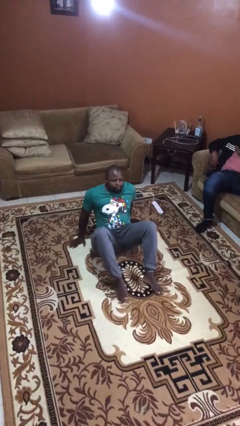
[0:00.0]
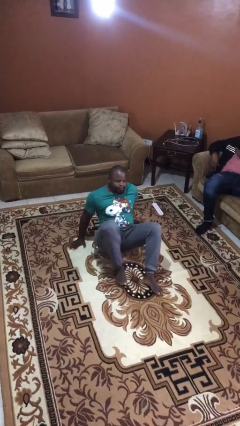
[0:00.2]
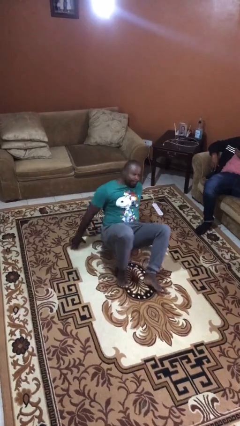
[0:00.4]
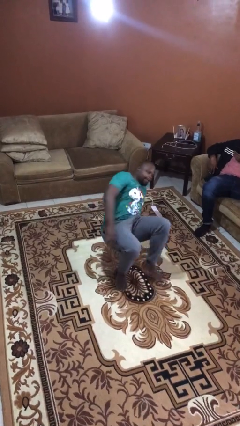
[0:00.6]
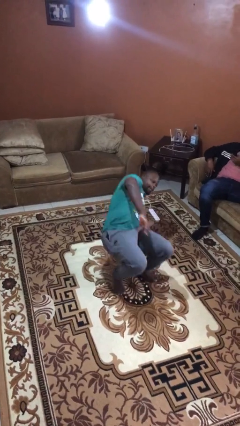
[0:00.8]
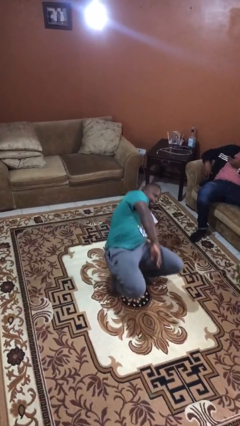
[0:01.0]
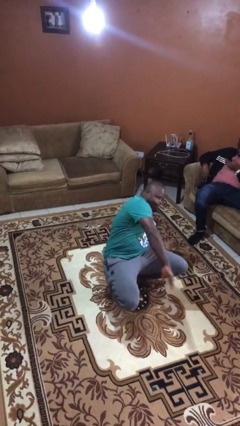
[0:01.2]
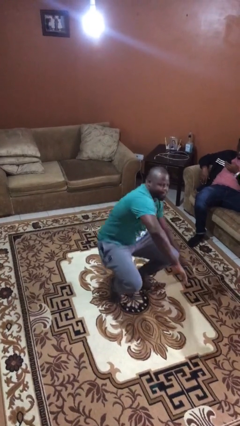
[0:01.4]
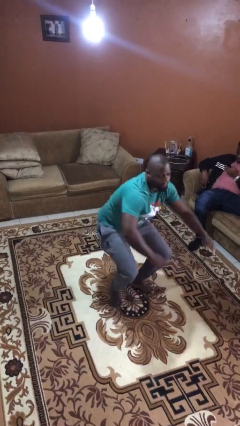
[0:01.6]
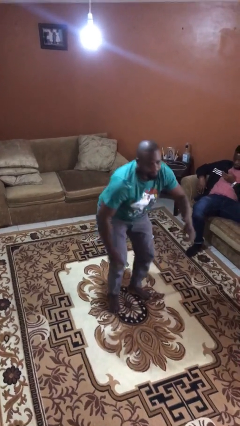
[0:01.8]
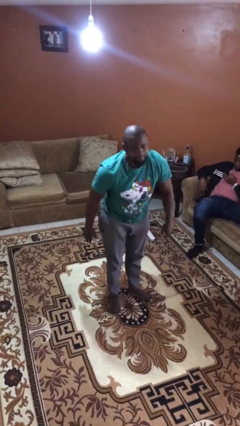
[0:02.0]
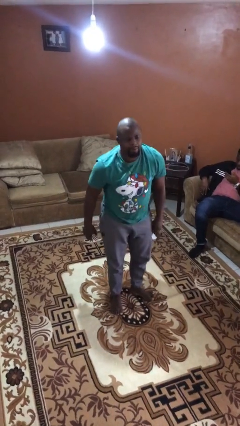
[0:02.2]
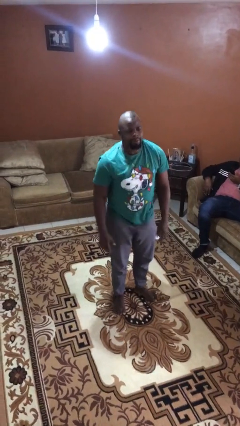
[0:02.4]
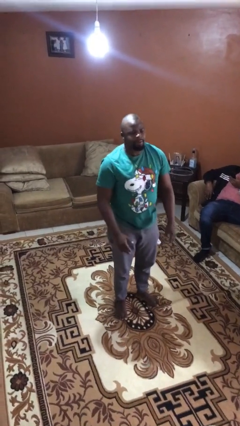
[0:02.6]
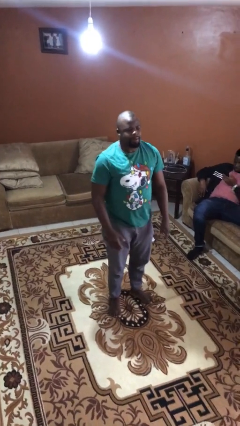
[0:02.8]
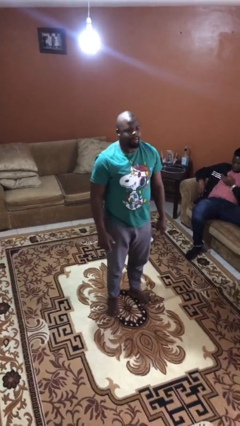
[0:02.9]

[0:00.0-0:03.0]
person stands up

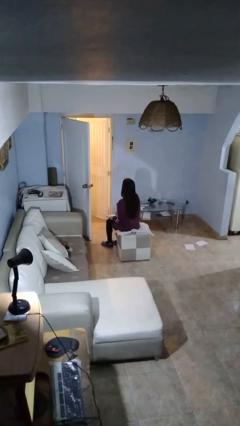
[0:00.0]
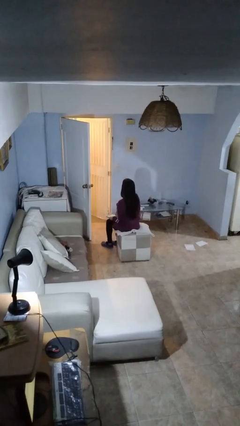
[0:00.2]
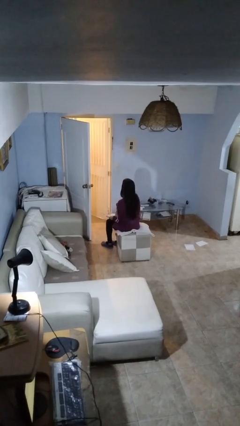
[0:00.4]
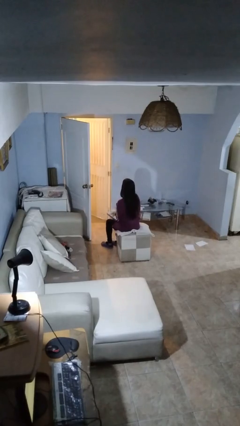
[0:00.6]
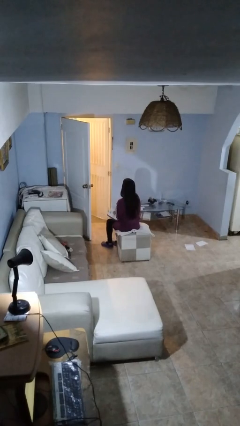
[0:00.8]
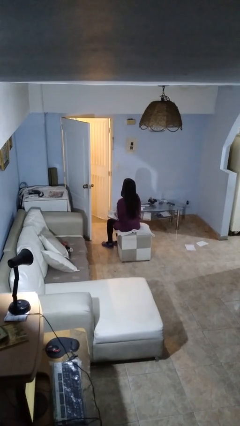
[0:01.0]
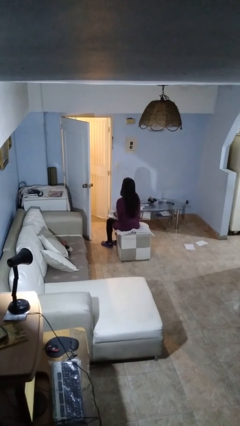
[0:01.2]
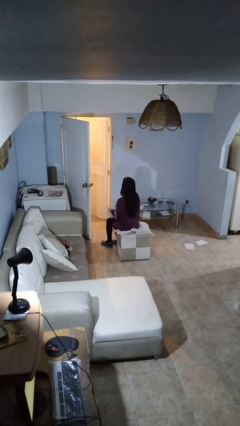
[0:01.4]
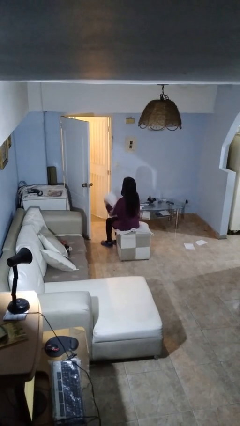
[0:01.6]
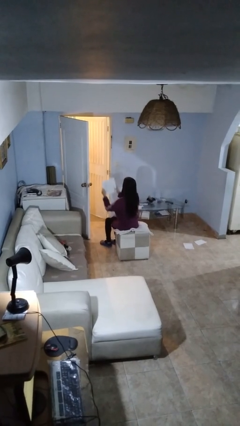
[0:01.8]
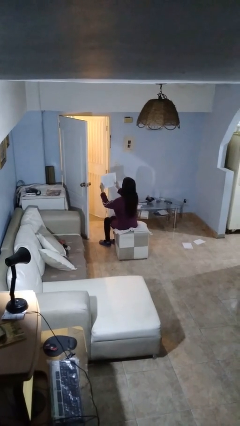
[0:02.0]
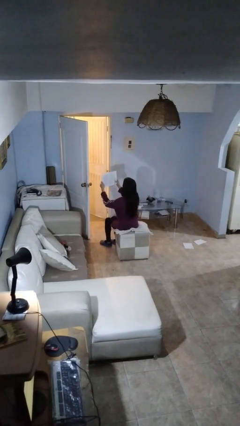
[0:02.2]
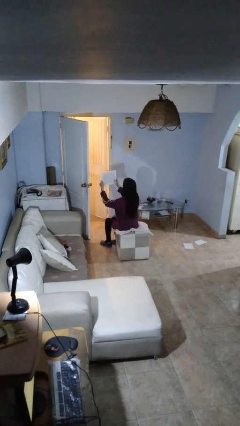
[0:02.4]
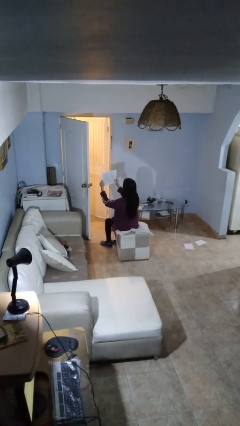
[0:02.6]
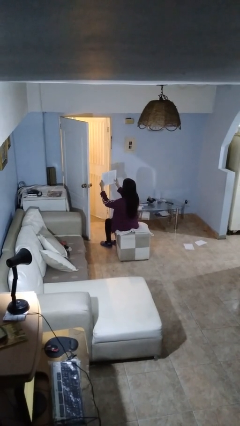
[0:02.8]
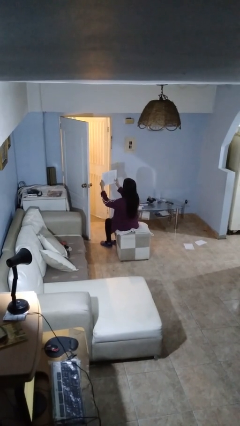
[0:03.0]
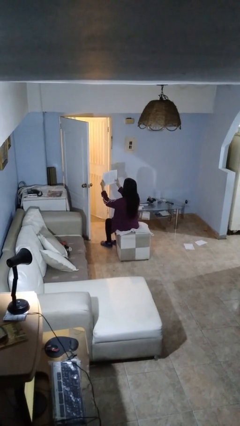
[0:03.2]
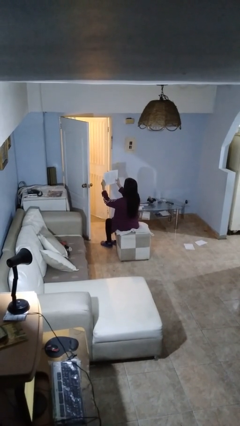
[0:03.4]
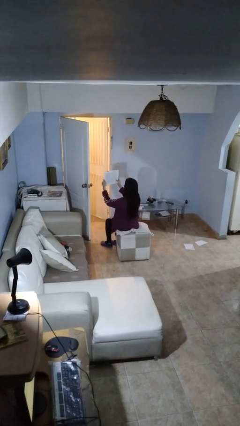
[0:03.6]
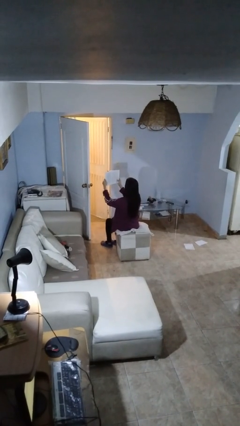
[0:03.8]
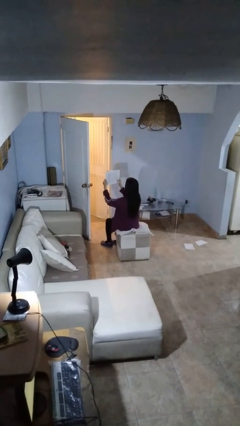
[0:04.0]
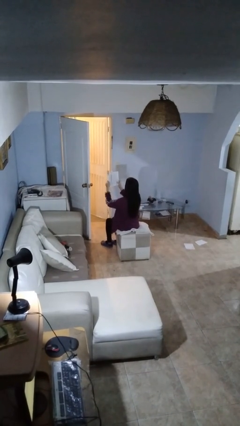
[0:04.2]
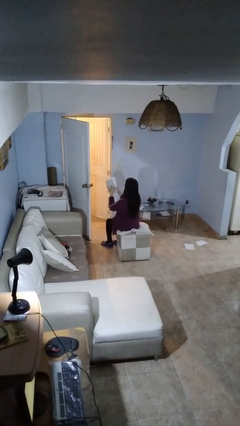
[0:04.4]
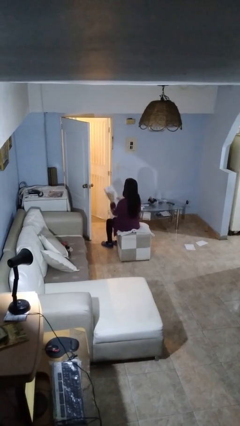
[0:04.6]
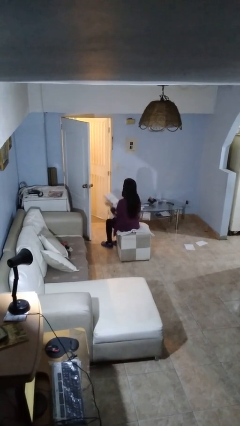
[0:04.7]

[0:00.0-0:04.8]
person reads book

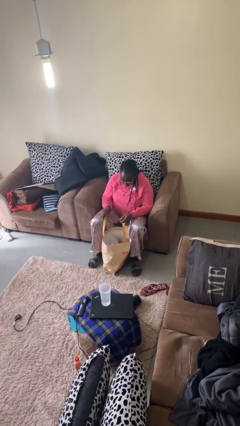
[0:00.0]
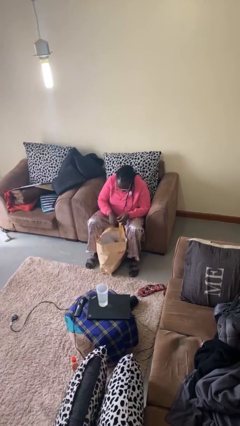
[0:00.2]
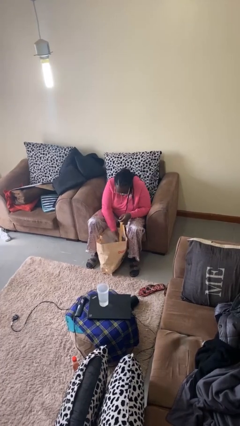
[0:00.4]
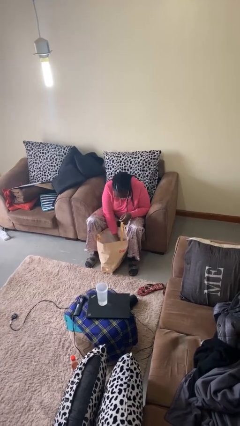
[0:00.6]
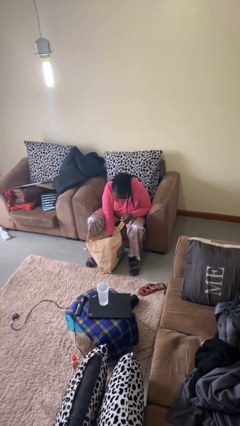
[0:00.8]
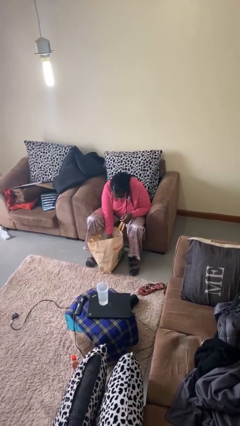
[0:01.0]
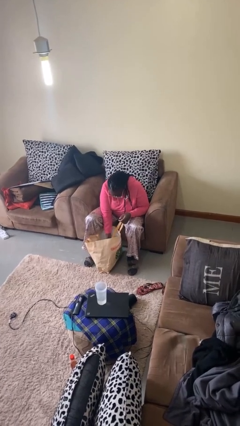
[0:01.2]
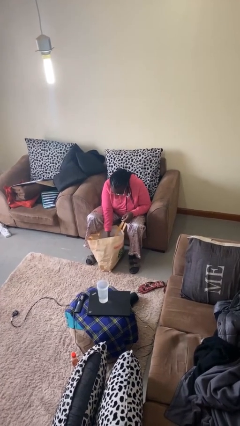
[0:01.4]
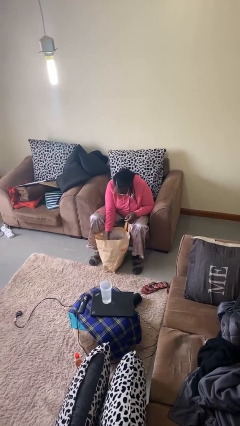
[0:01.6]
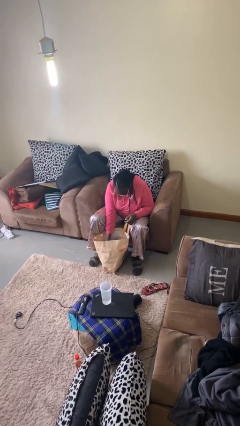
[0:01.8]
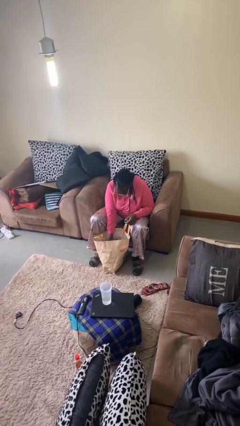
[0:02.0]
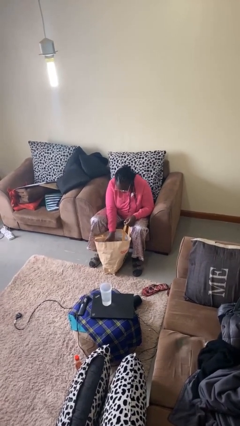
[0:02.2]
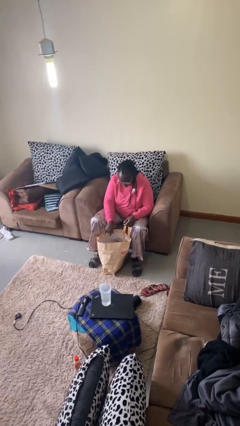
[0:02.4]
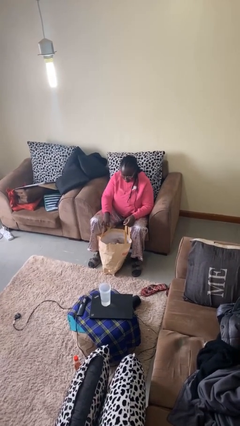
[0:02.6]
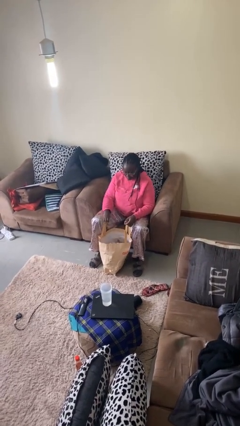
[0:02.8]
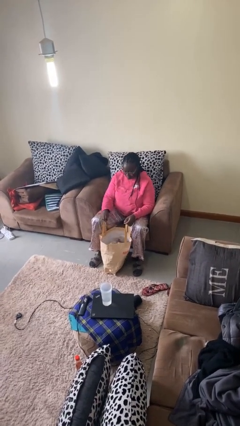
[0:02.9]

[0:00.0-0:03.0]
person searches in bag

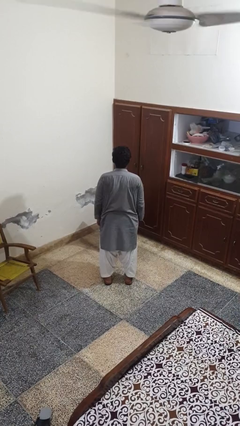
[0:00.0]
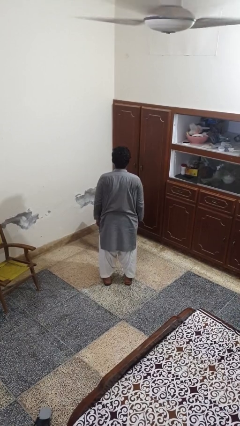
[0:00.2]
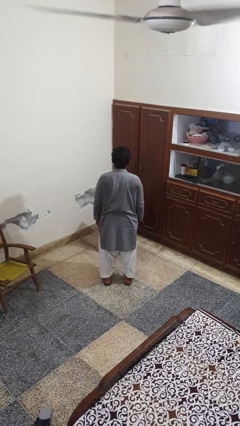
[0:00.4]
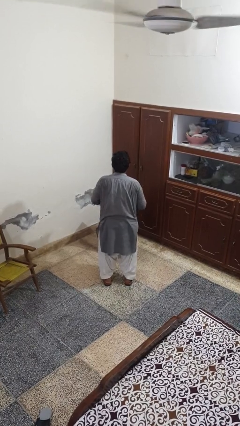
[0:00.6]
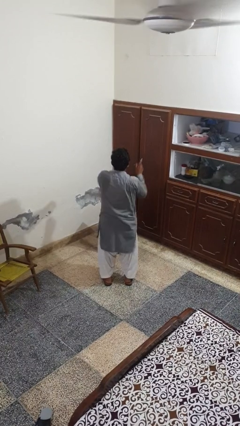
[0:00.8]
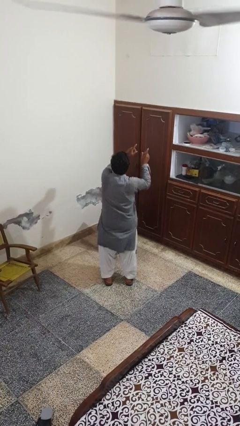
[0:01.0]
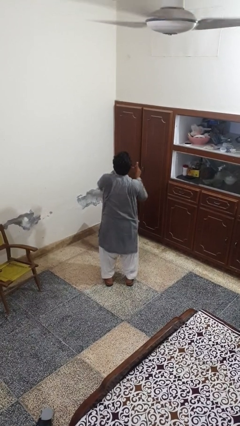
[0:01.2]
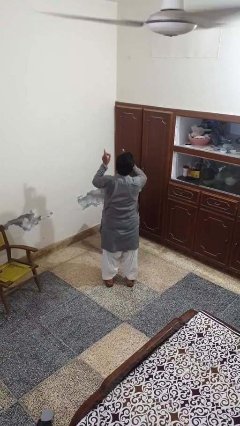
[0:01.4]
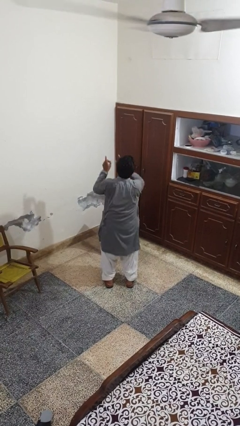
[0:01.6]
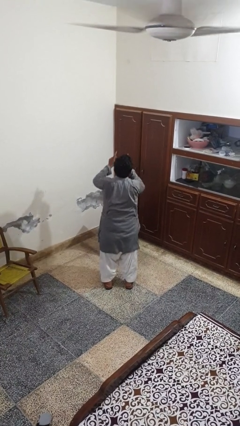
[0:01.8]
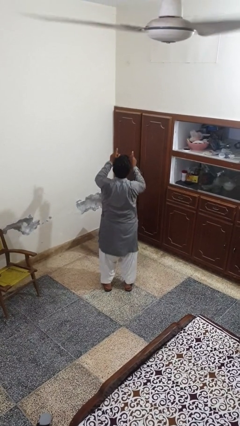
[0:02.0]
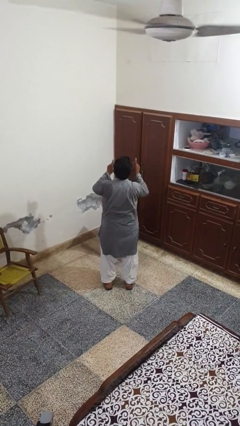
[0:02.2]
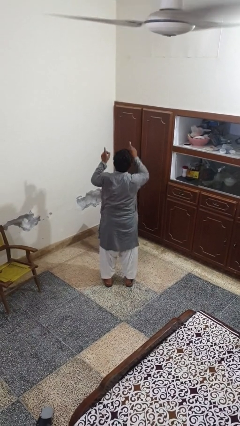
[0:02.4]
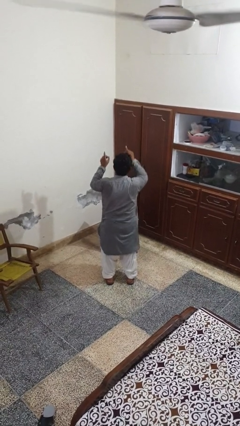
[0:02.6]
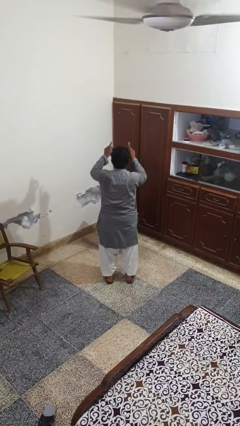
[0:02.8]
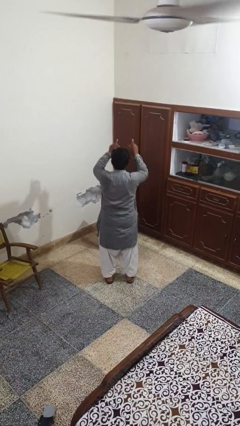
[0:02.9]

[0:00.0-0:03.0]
person dances in place

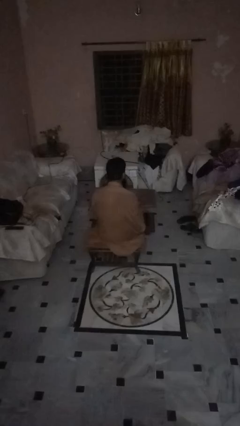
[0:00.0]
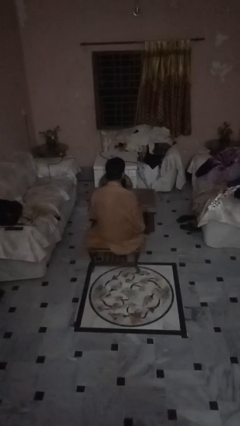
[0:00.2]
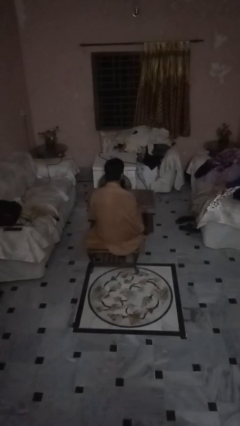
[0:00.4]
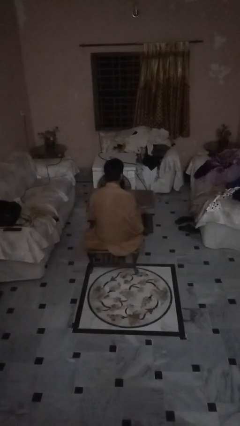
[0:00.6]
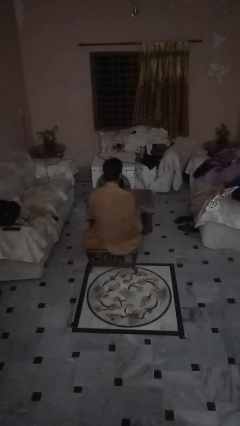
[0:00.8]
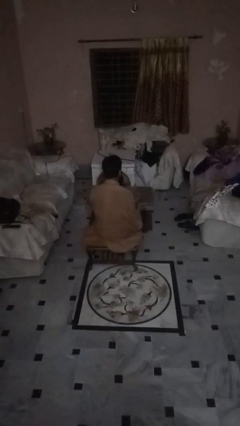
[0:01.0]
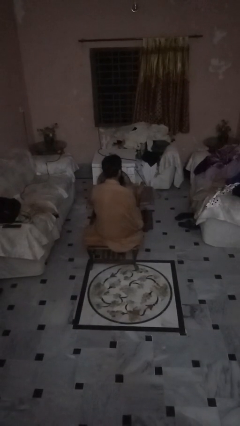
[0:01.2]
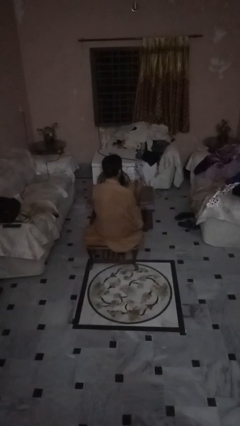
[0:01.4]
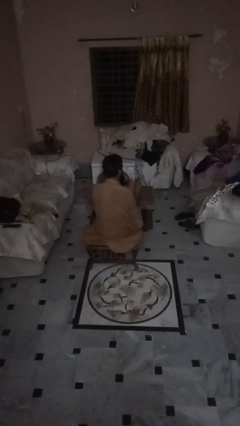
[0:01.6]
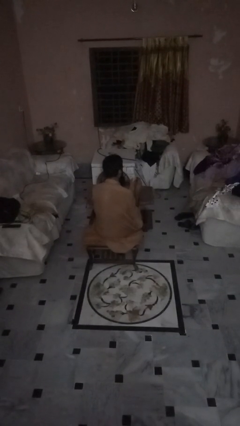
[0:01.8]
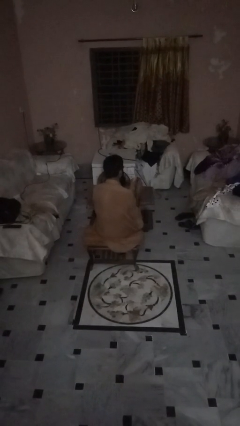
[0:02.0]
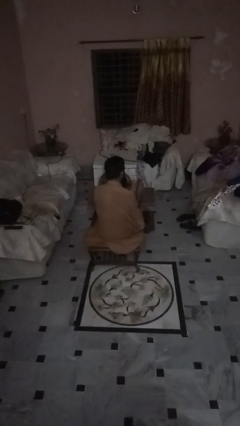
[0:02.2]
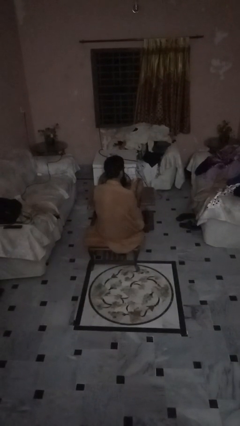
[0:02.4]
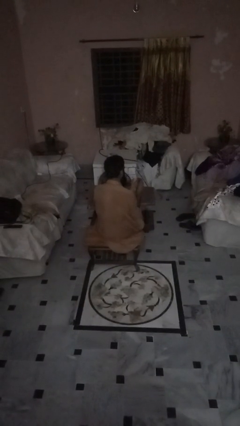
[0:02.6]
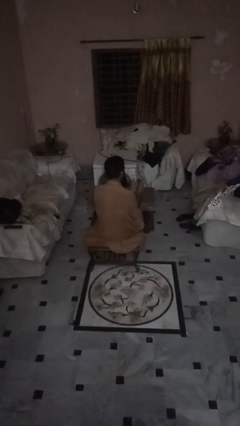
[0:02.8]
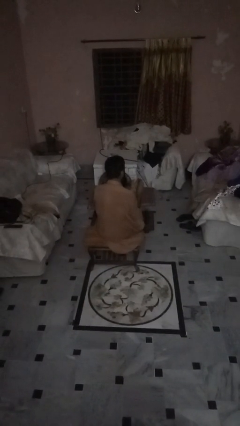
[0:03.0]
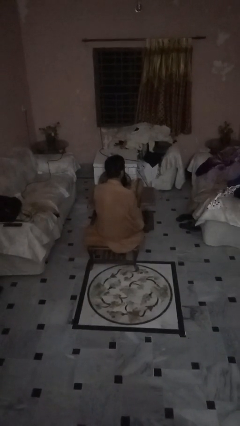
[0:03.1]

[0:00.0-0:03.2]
person clips fingernails

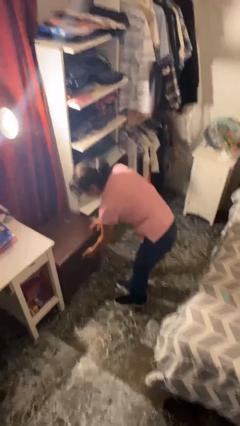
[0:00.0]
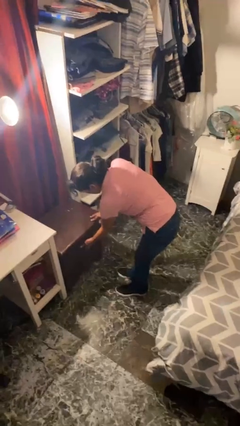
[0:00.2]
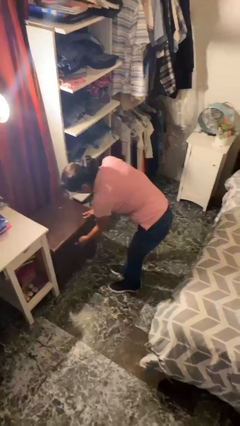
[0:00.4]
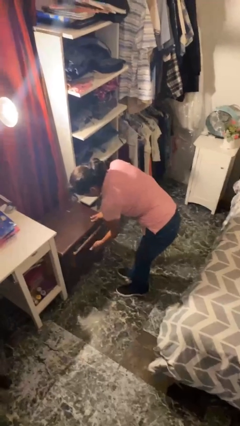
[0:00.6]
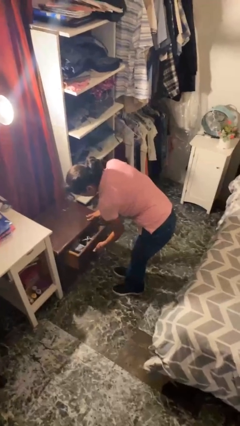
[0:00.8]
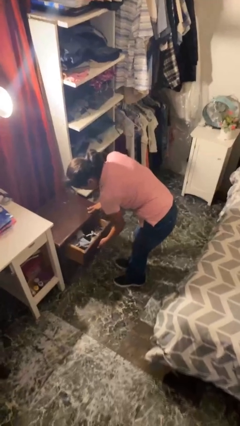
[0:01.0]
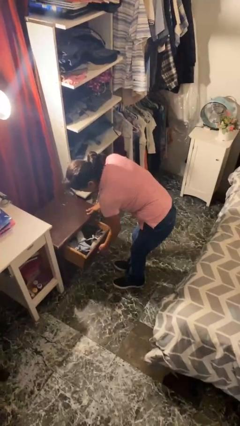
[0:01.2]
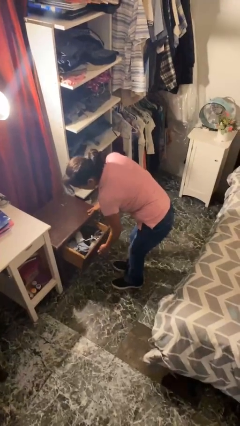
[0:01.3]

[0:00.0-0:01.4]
person opens dresser drawer
